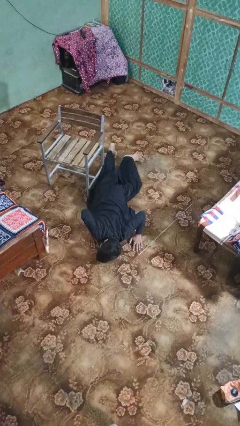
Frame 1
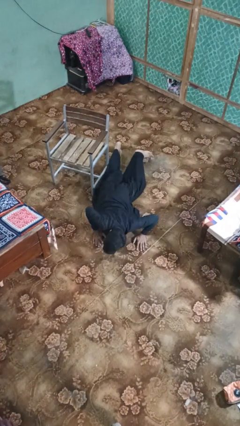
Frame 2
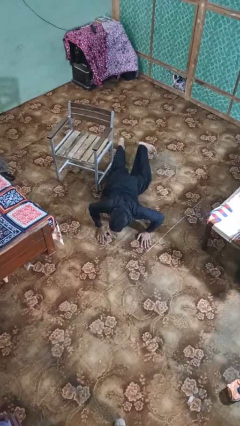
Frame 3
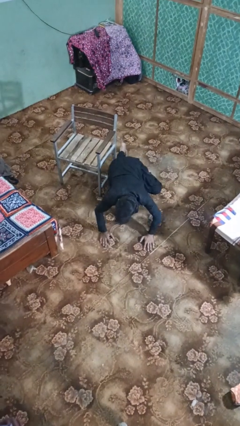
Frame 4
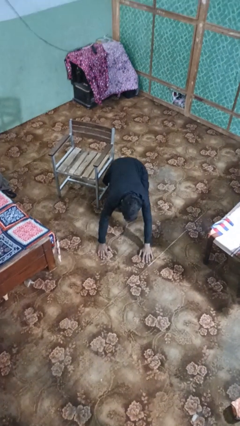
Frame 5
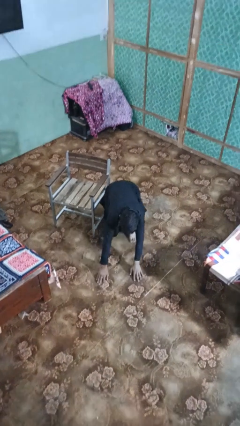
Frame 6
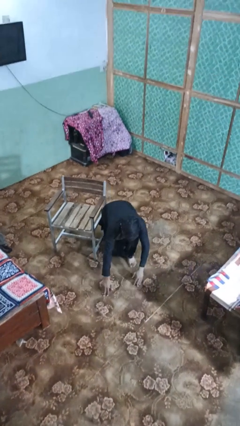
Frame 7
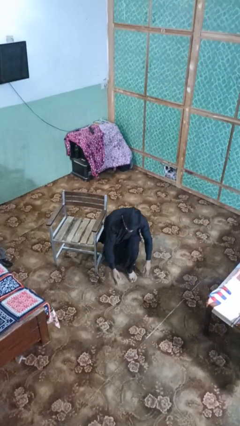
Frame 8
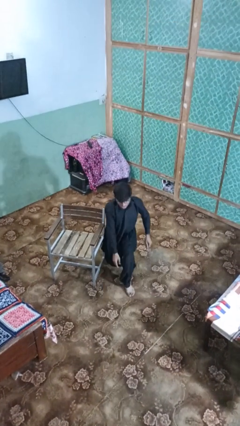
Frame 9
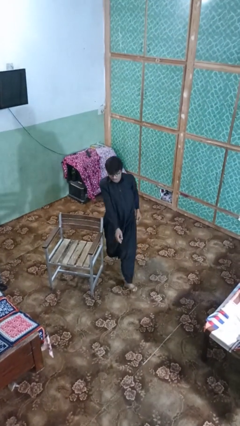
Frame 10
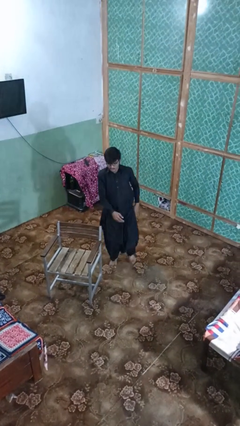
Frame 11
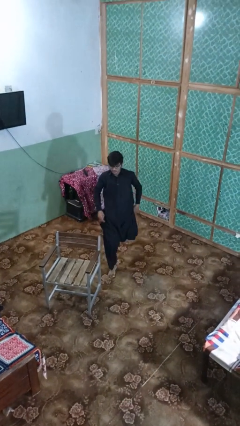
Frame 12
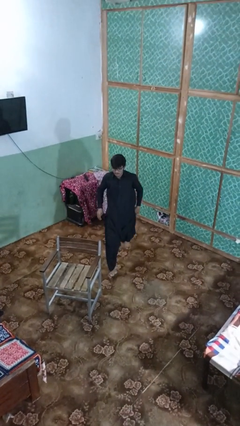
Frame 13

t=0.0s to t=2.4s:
person stands up from floor

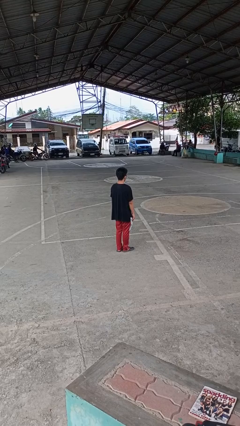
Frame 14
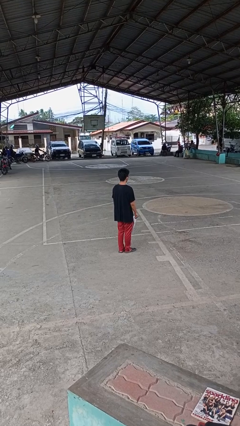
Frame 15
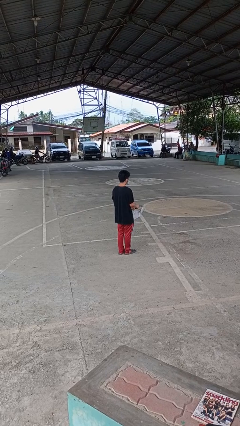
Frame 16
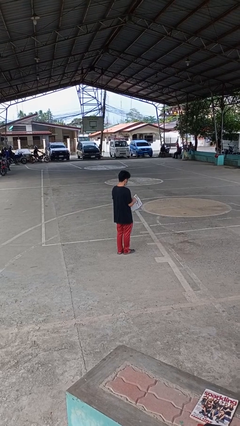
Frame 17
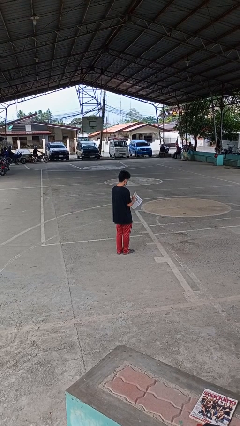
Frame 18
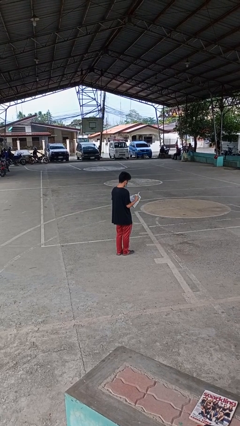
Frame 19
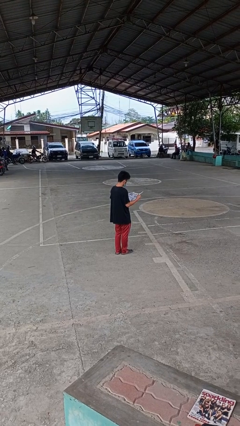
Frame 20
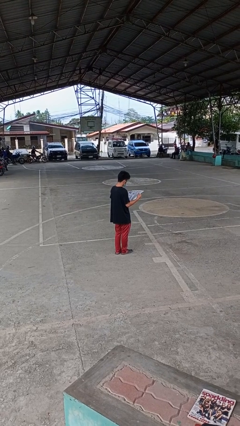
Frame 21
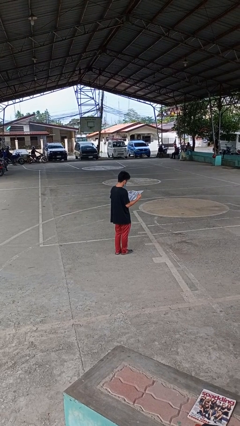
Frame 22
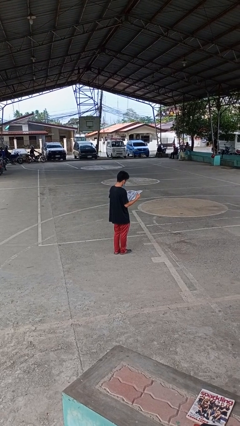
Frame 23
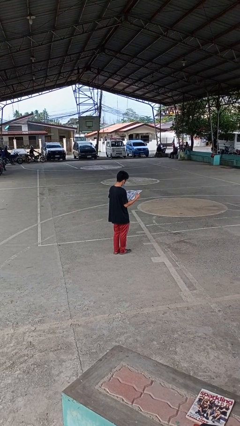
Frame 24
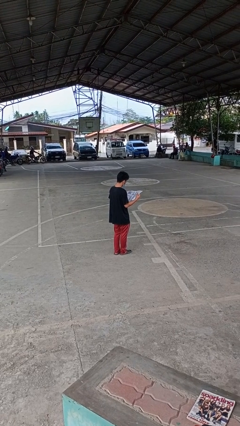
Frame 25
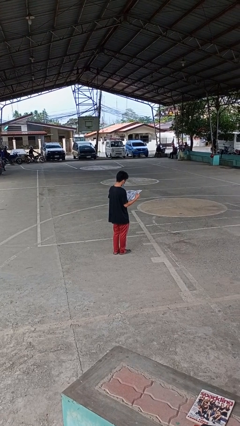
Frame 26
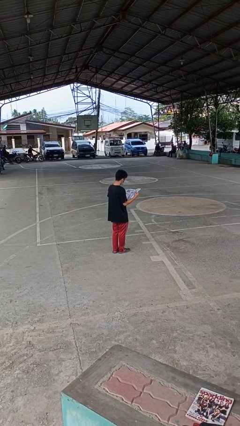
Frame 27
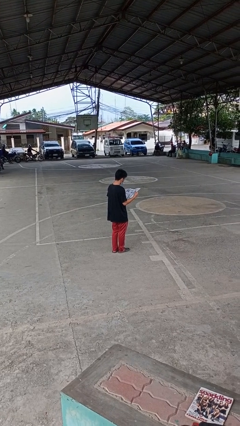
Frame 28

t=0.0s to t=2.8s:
person reads newspaper

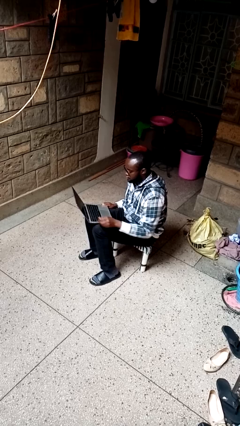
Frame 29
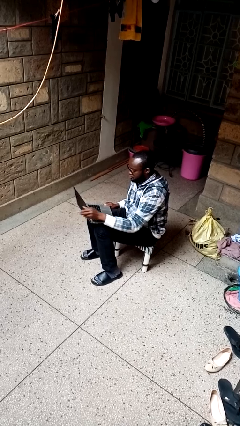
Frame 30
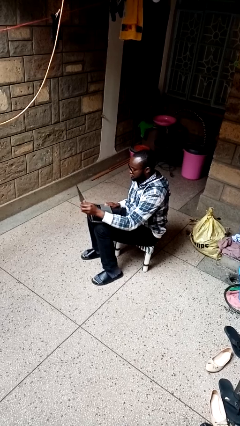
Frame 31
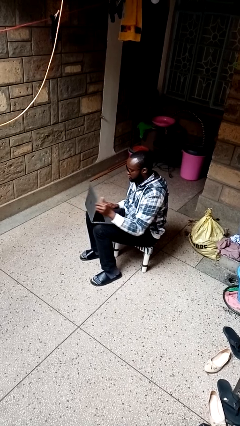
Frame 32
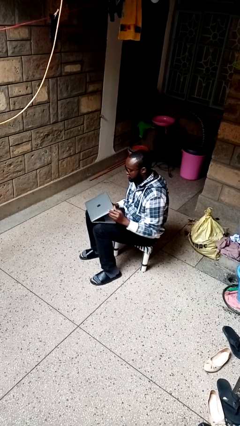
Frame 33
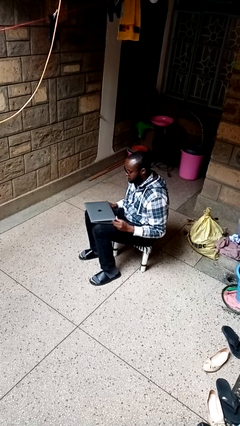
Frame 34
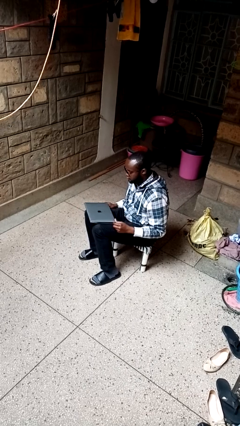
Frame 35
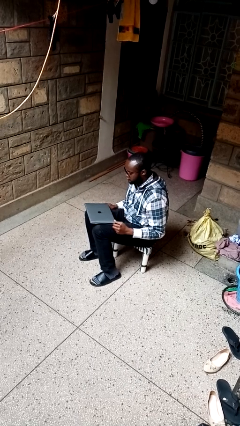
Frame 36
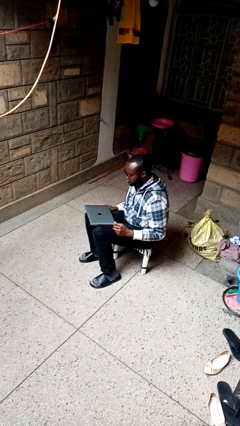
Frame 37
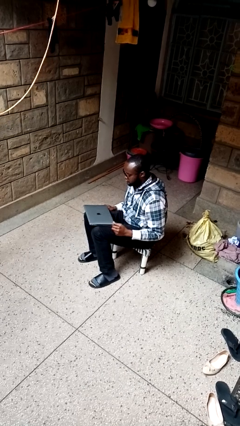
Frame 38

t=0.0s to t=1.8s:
person closes laptop

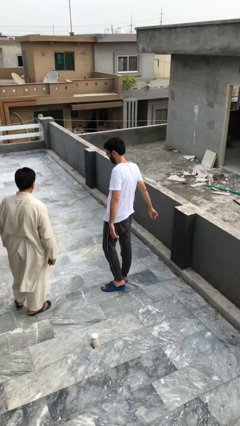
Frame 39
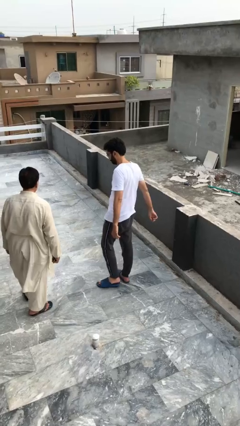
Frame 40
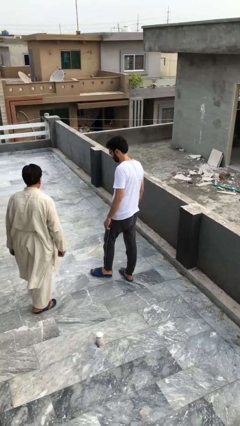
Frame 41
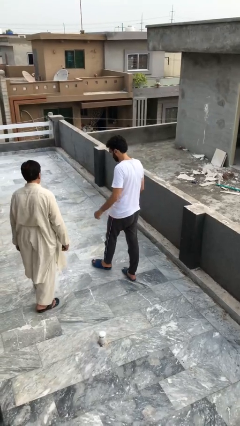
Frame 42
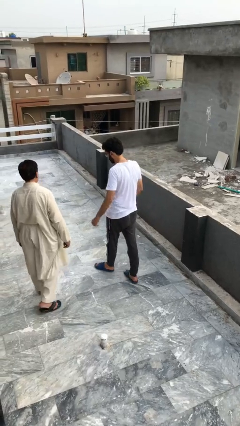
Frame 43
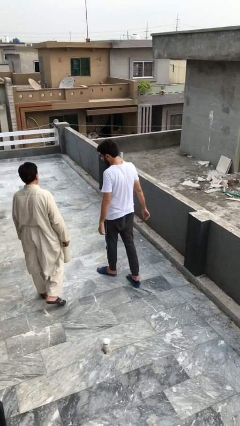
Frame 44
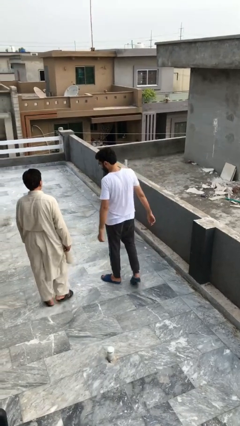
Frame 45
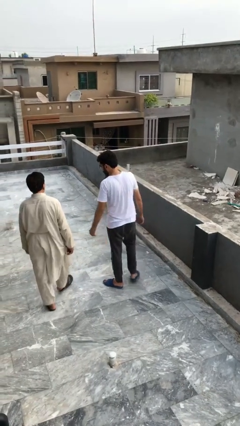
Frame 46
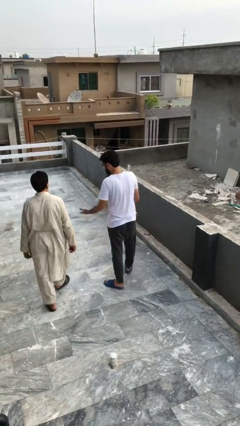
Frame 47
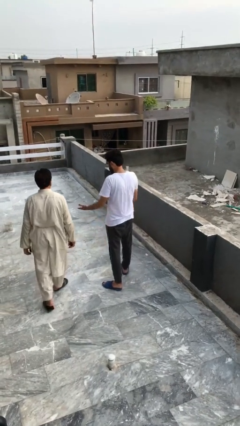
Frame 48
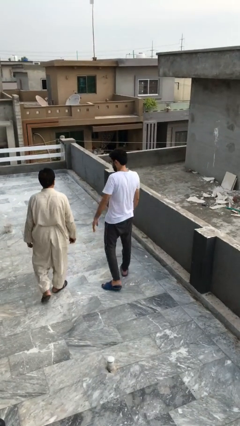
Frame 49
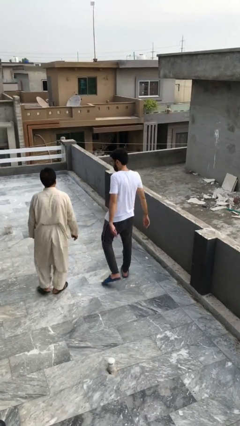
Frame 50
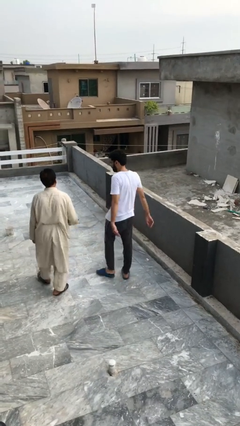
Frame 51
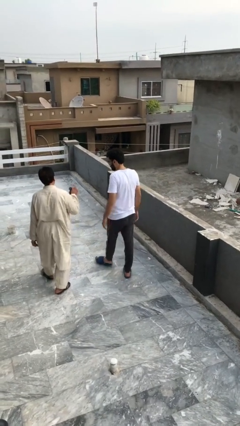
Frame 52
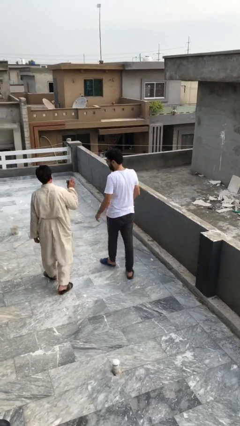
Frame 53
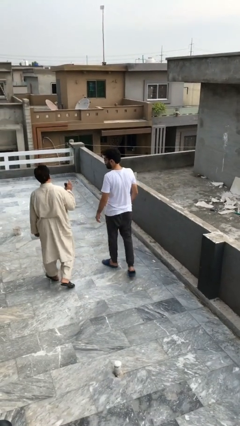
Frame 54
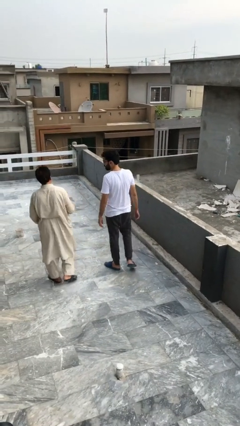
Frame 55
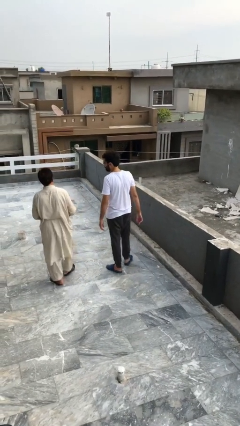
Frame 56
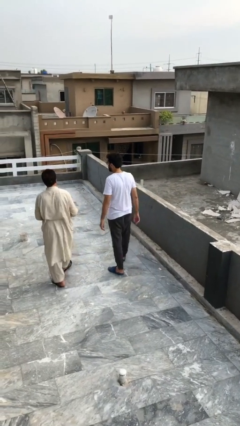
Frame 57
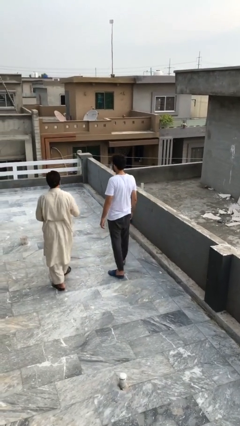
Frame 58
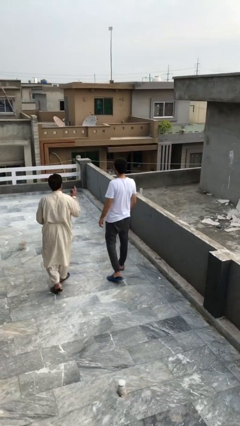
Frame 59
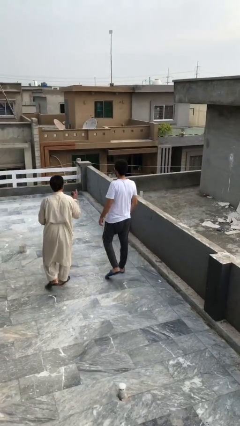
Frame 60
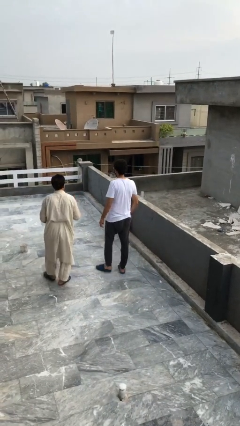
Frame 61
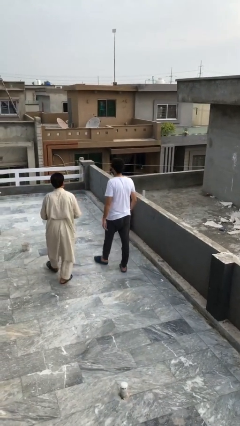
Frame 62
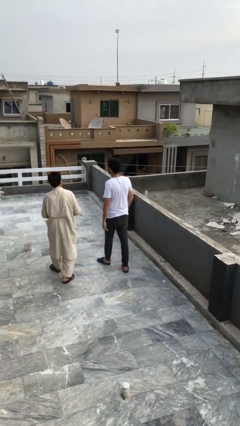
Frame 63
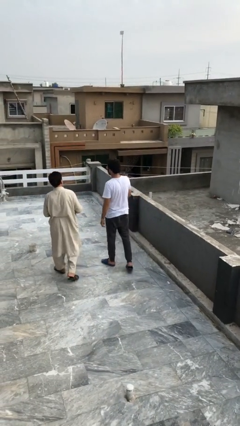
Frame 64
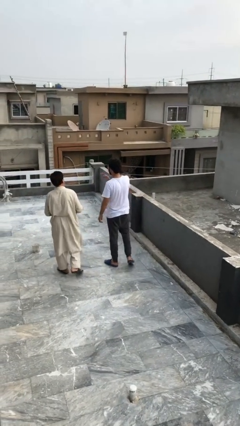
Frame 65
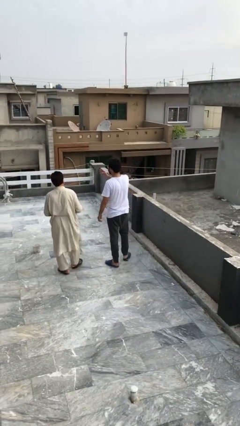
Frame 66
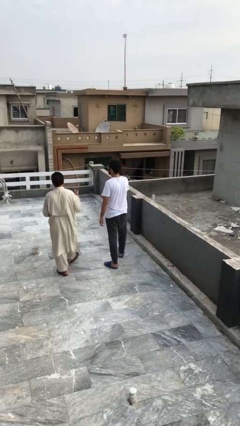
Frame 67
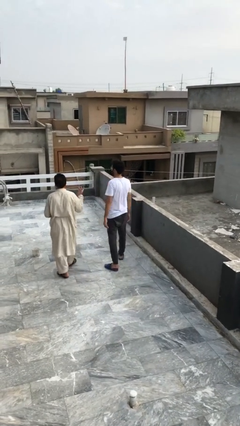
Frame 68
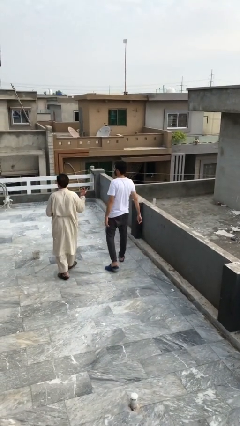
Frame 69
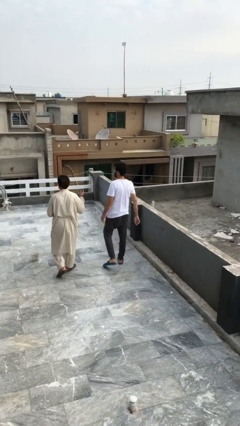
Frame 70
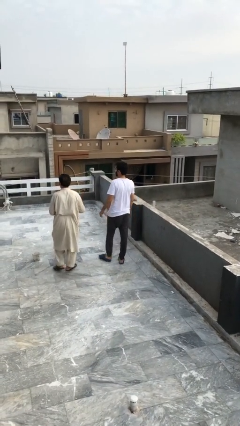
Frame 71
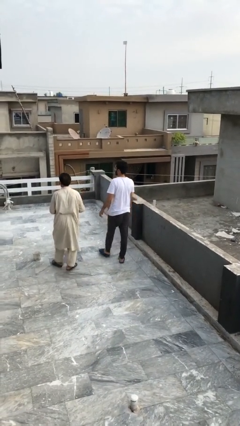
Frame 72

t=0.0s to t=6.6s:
person talks to person

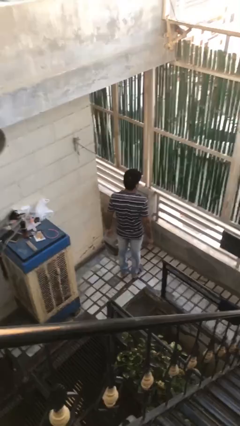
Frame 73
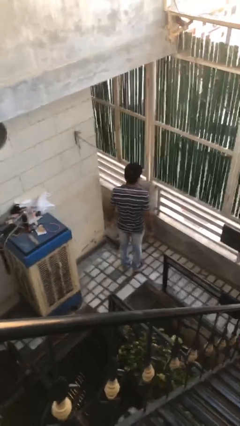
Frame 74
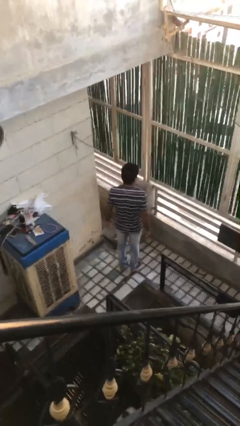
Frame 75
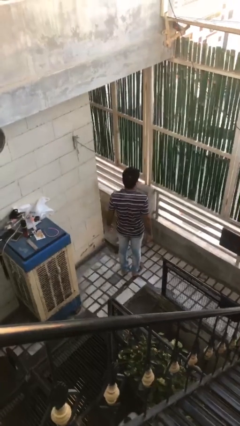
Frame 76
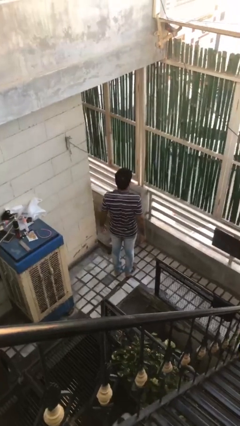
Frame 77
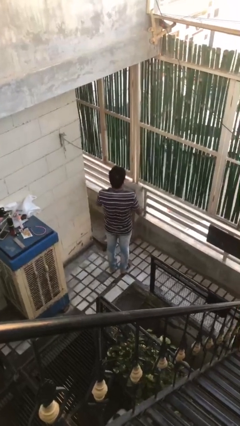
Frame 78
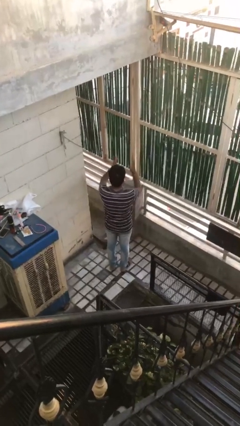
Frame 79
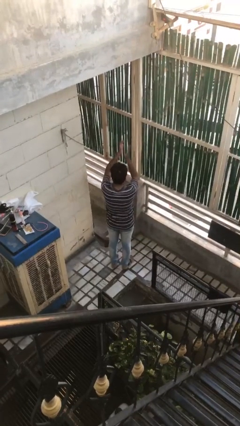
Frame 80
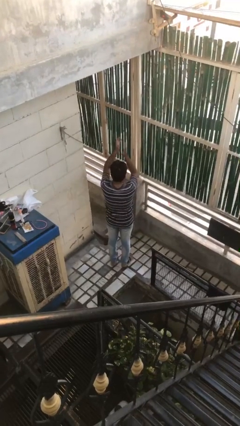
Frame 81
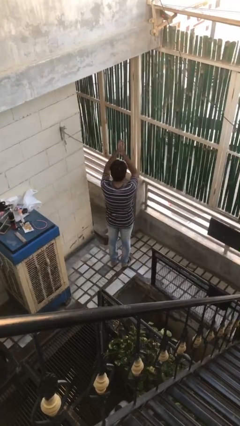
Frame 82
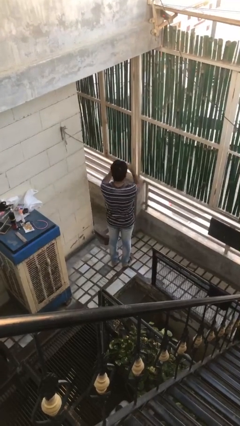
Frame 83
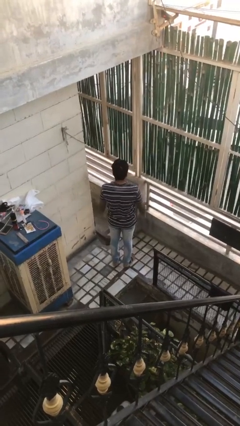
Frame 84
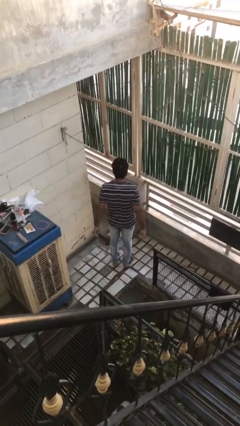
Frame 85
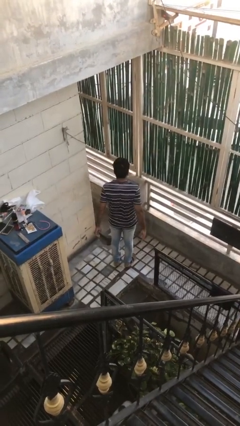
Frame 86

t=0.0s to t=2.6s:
person claps hands

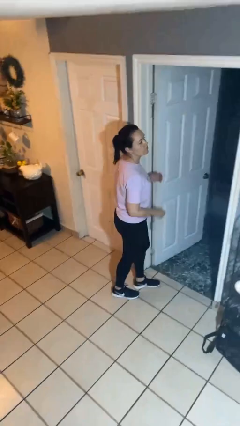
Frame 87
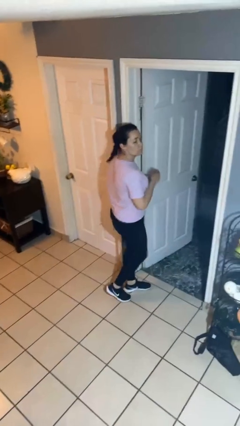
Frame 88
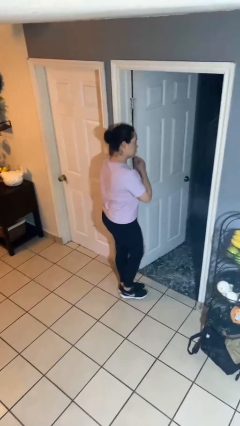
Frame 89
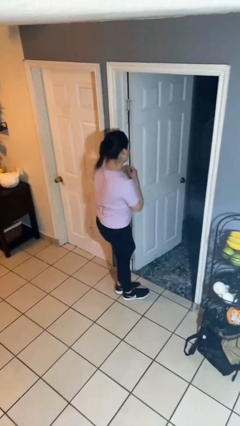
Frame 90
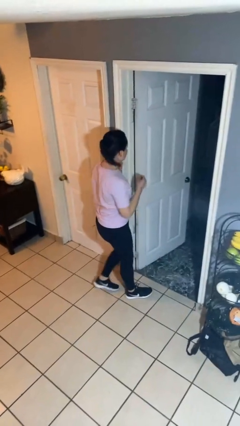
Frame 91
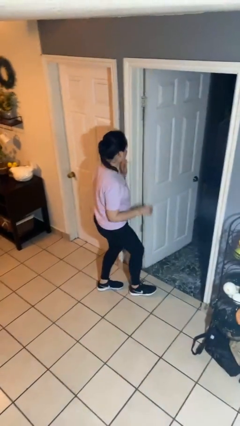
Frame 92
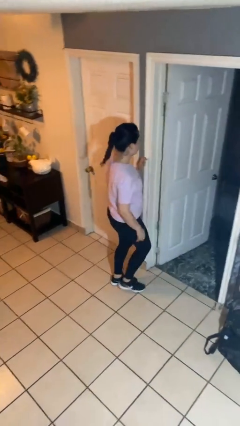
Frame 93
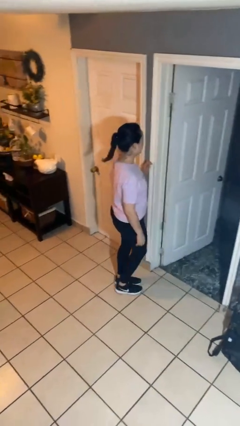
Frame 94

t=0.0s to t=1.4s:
person bumps into wall
